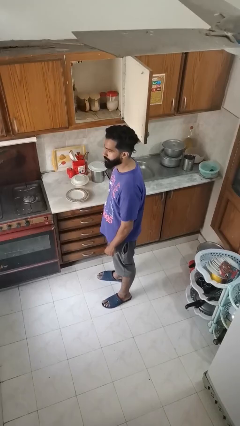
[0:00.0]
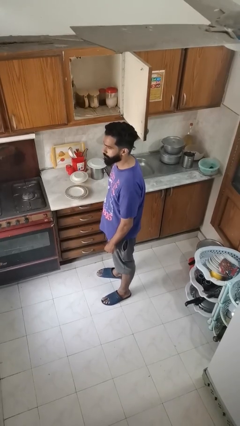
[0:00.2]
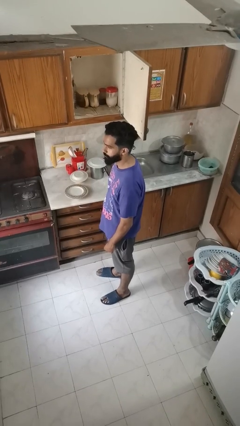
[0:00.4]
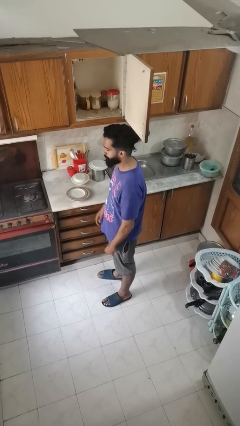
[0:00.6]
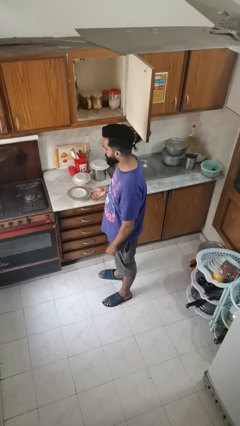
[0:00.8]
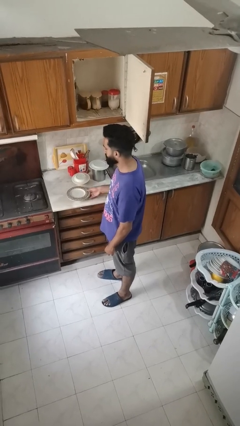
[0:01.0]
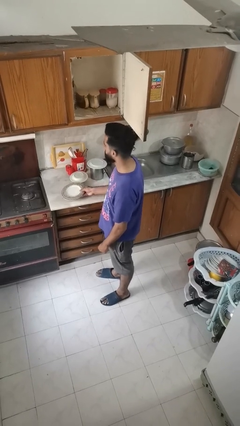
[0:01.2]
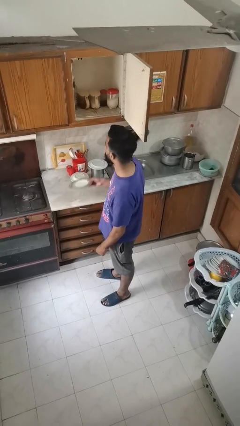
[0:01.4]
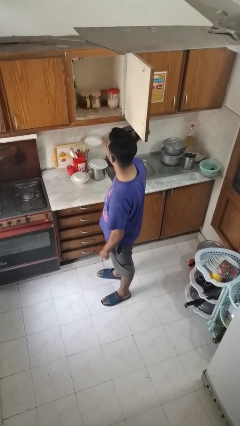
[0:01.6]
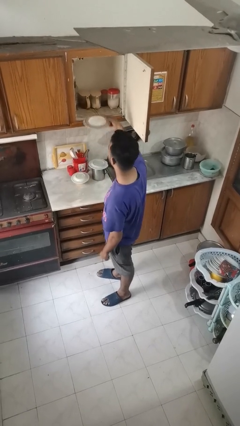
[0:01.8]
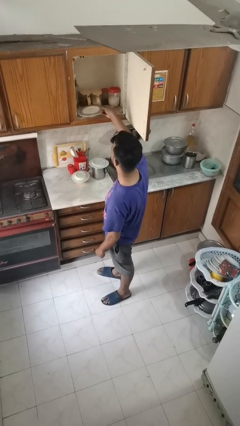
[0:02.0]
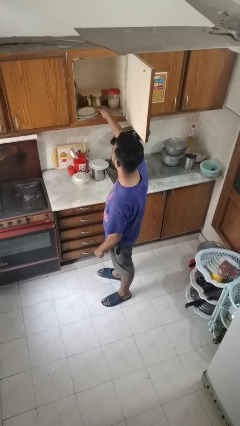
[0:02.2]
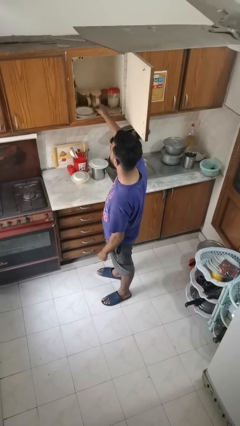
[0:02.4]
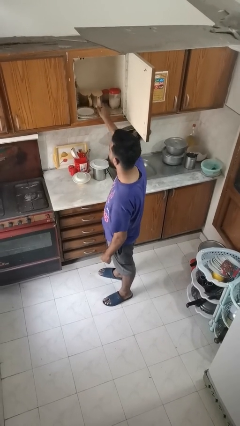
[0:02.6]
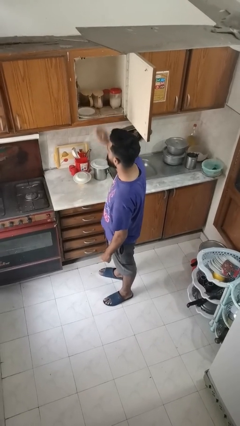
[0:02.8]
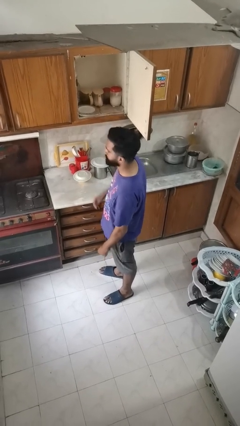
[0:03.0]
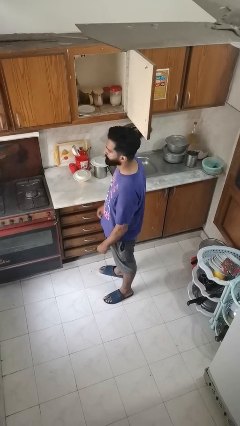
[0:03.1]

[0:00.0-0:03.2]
person puts object in cabinet

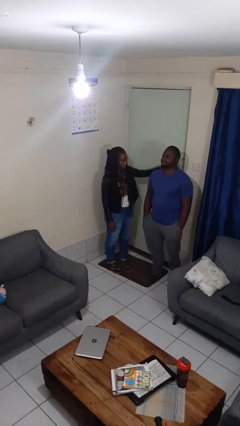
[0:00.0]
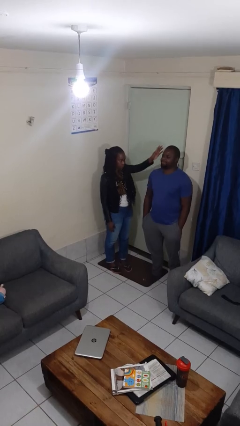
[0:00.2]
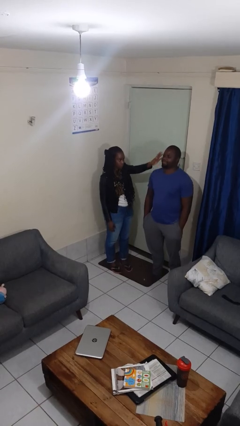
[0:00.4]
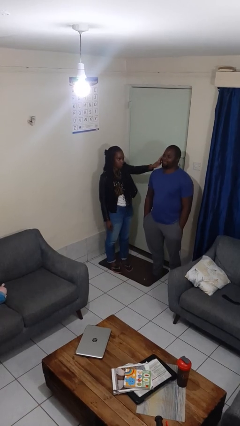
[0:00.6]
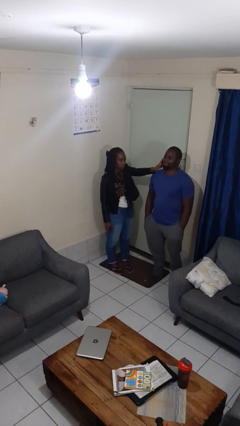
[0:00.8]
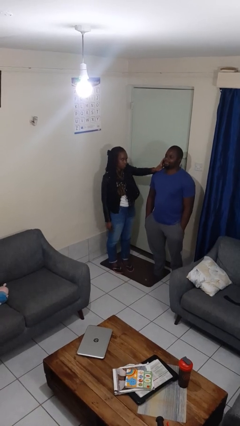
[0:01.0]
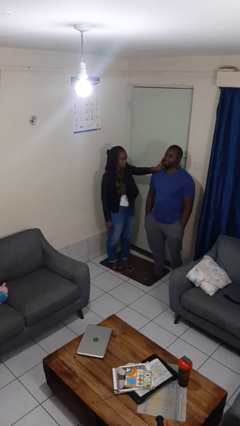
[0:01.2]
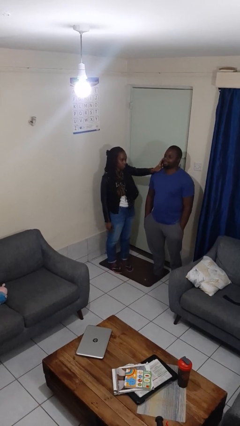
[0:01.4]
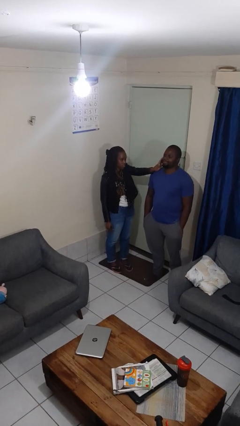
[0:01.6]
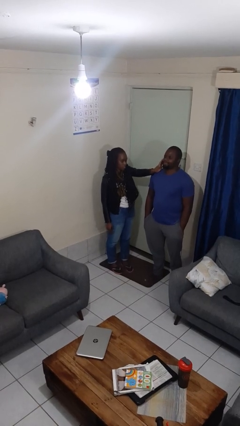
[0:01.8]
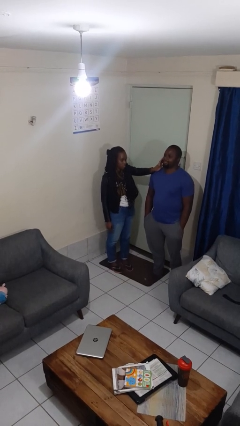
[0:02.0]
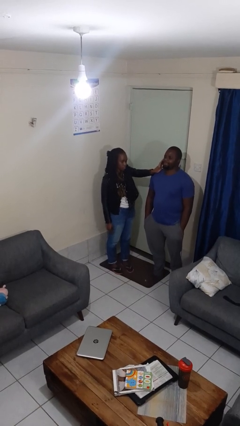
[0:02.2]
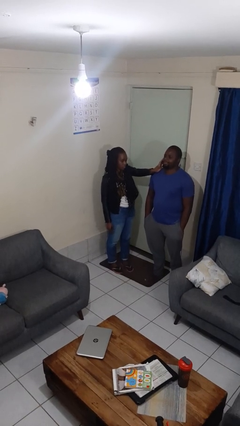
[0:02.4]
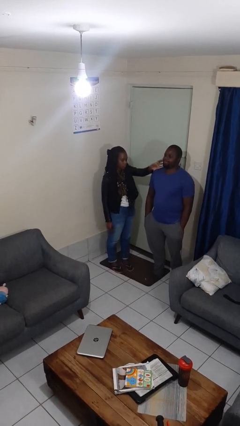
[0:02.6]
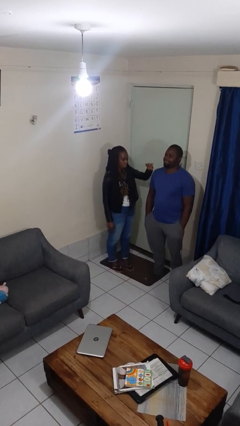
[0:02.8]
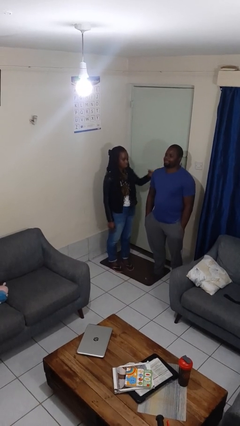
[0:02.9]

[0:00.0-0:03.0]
person touches face of person

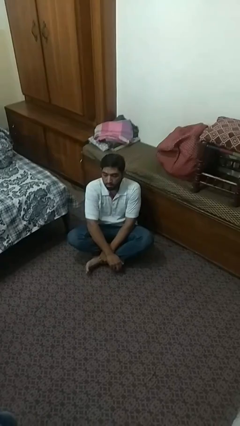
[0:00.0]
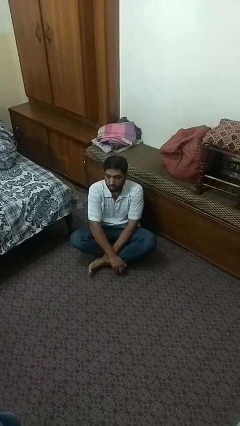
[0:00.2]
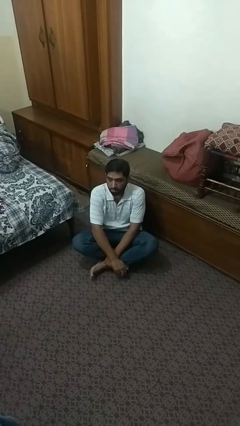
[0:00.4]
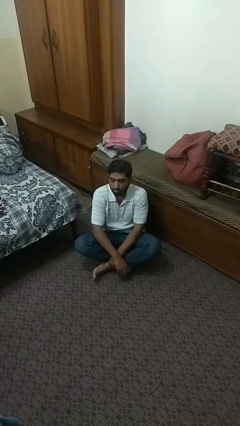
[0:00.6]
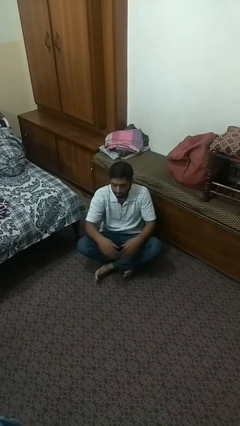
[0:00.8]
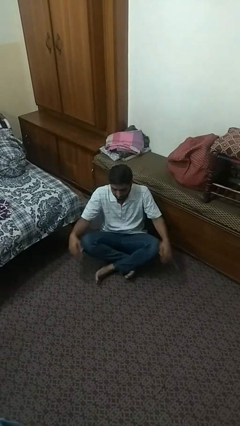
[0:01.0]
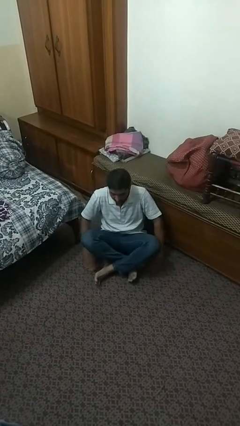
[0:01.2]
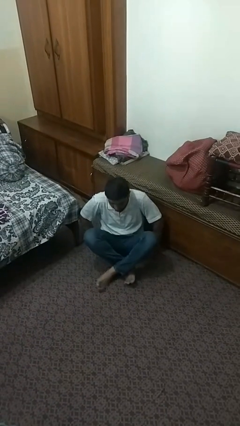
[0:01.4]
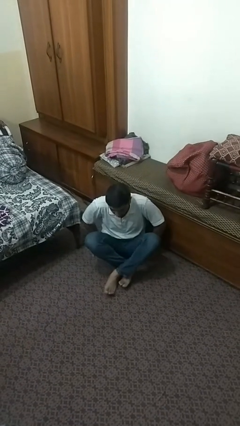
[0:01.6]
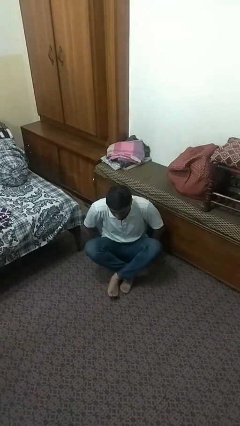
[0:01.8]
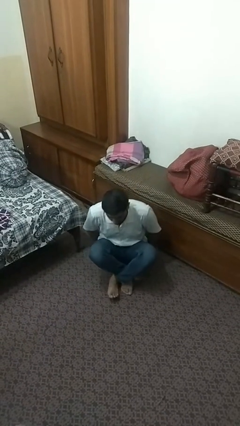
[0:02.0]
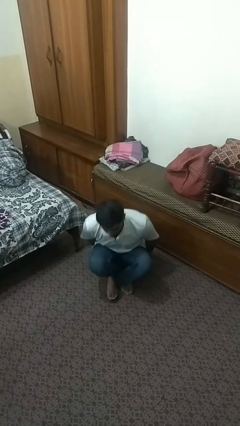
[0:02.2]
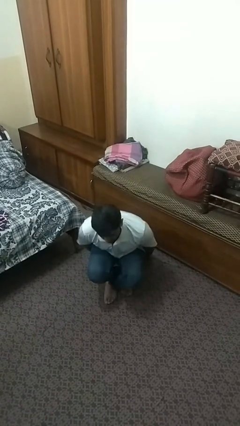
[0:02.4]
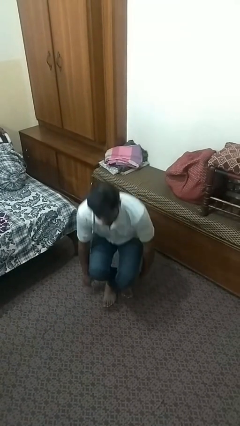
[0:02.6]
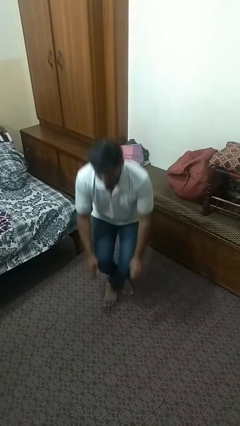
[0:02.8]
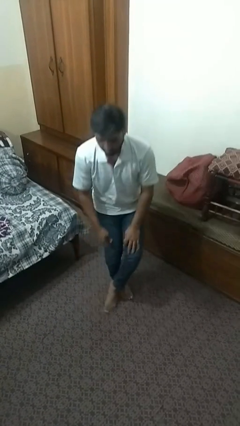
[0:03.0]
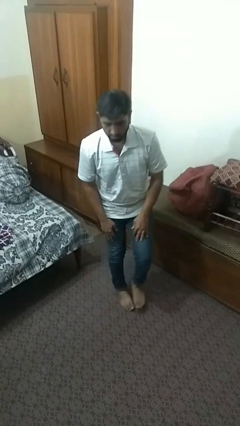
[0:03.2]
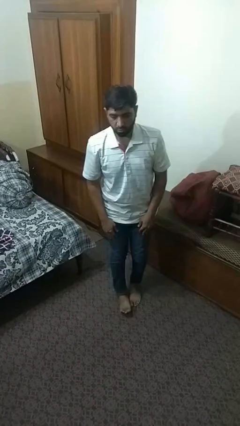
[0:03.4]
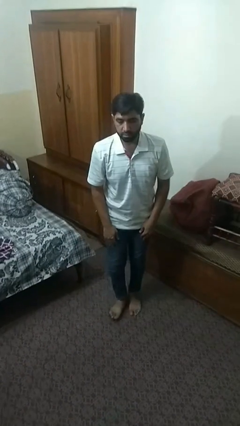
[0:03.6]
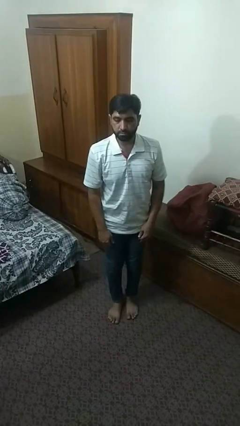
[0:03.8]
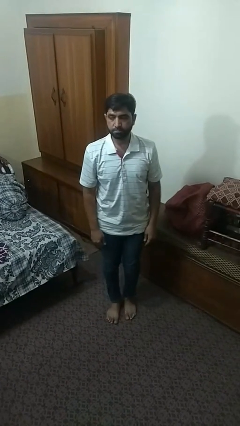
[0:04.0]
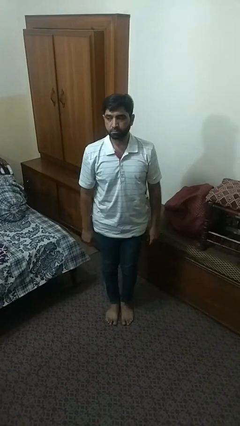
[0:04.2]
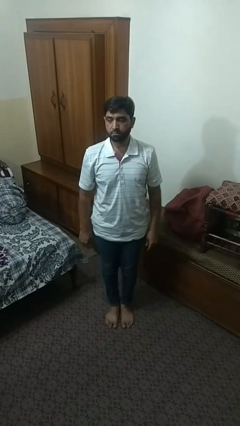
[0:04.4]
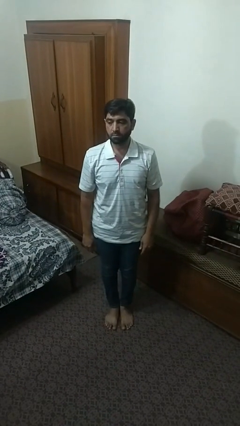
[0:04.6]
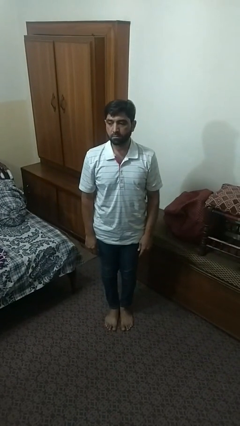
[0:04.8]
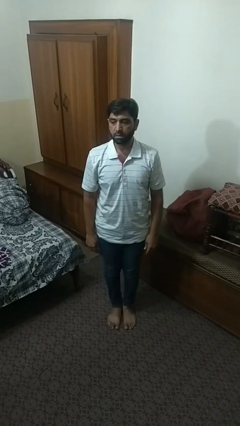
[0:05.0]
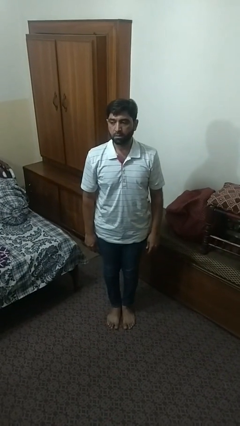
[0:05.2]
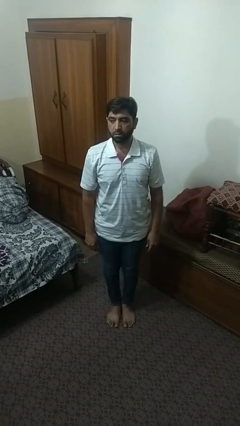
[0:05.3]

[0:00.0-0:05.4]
person stands up from floor

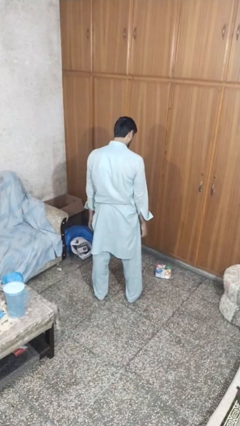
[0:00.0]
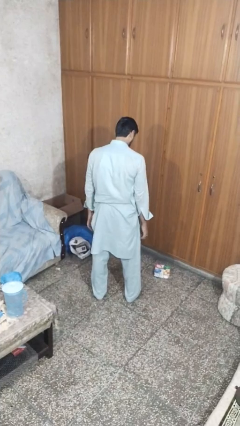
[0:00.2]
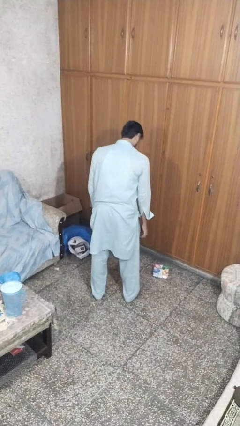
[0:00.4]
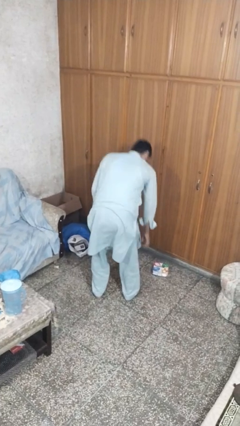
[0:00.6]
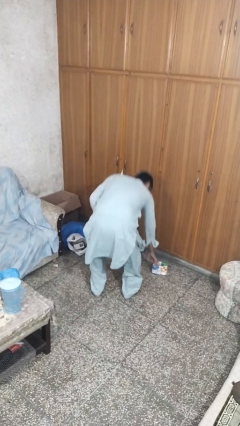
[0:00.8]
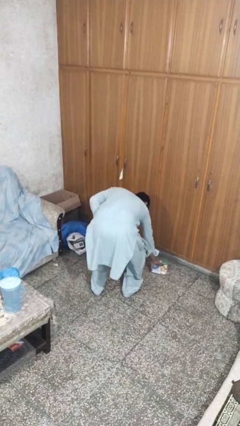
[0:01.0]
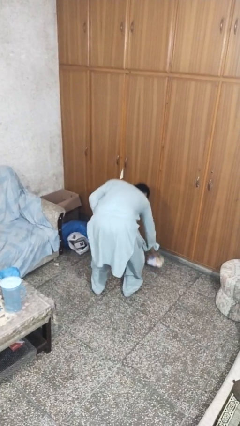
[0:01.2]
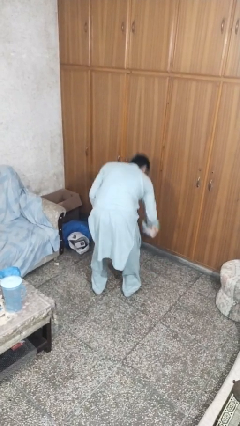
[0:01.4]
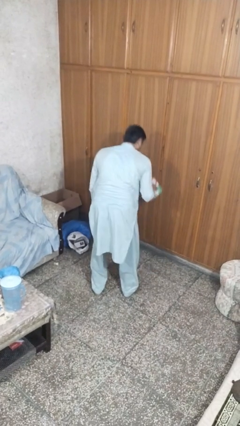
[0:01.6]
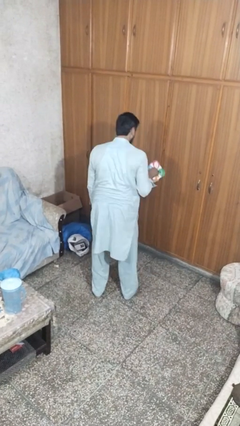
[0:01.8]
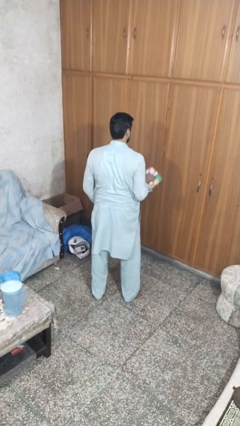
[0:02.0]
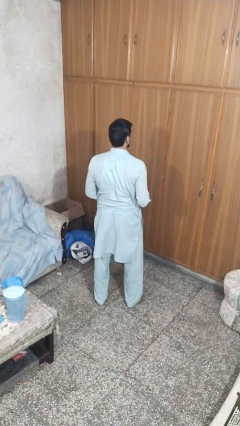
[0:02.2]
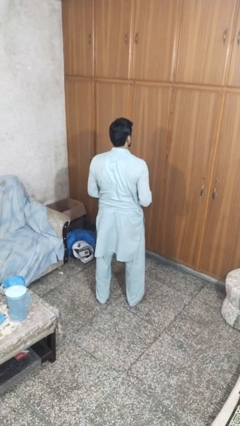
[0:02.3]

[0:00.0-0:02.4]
person picks up object from floor

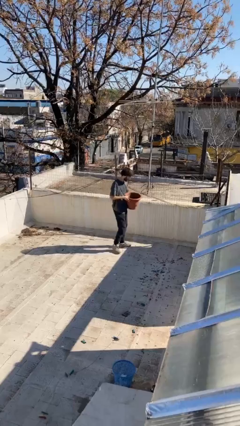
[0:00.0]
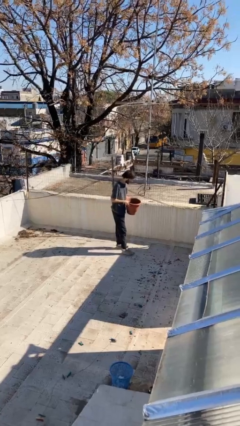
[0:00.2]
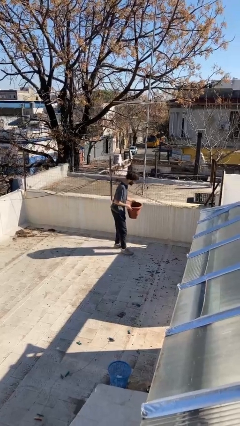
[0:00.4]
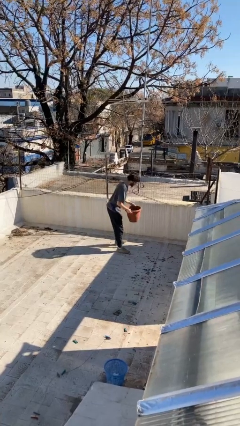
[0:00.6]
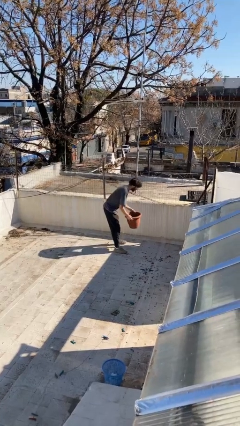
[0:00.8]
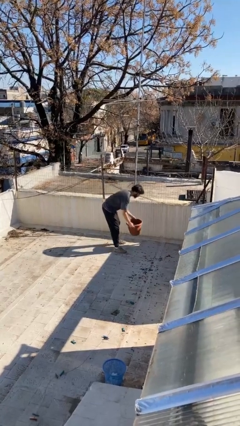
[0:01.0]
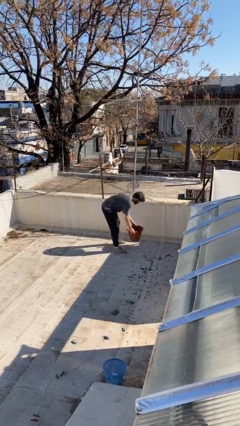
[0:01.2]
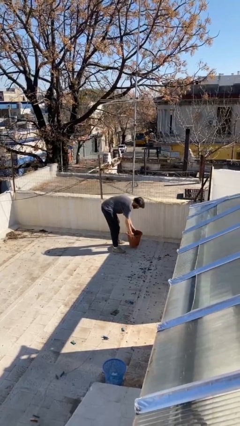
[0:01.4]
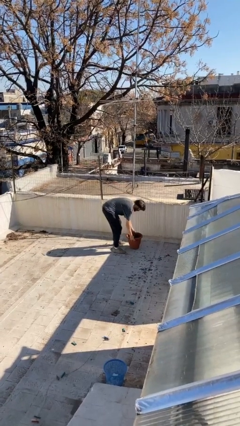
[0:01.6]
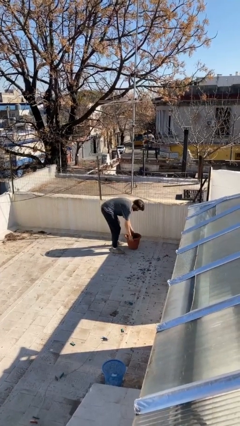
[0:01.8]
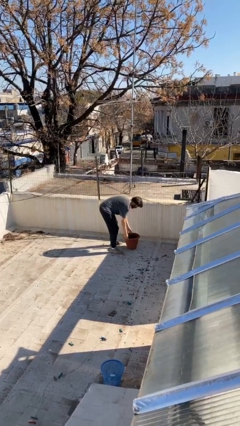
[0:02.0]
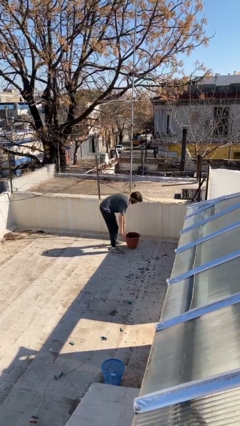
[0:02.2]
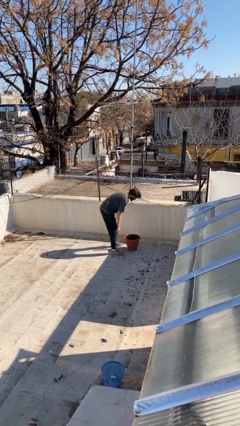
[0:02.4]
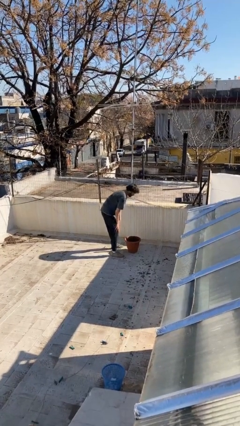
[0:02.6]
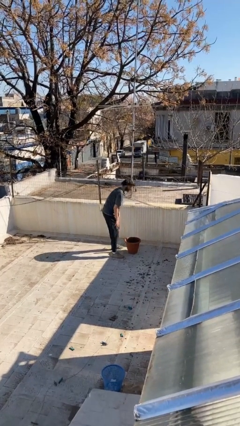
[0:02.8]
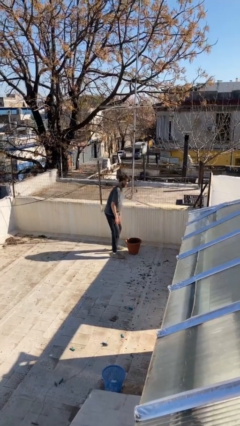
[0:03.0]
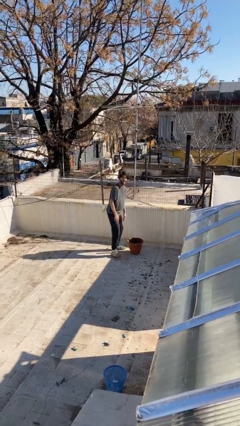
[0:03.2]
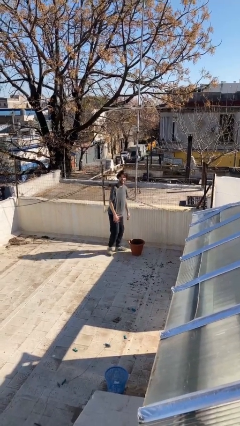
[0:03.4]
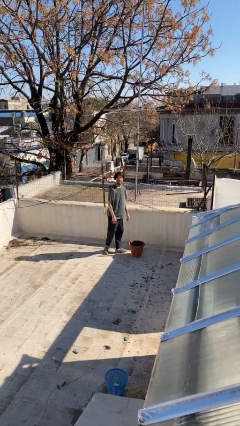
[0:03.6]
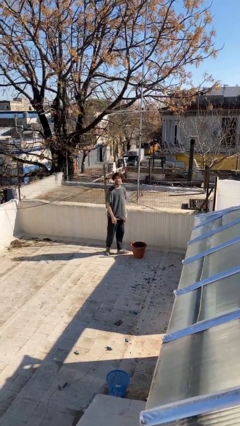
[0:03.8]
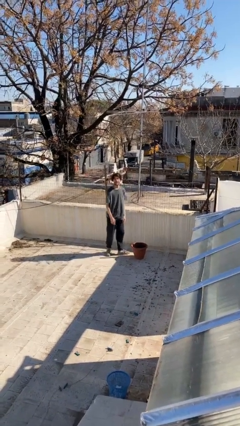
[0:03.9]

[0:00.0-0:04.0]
person puts down object on floor
